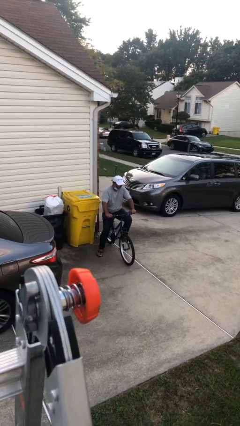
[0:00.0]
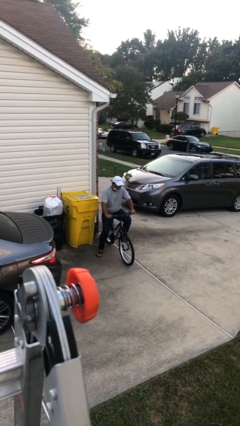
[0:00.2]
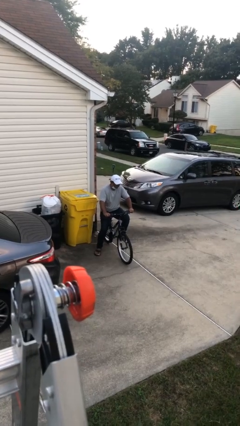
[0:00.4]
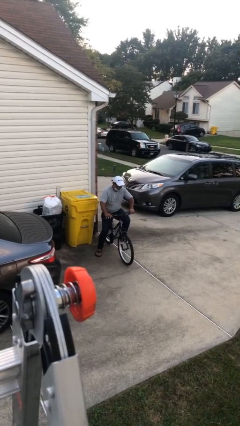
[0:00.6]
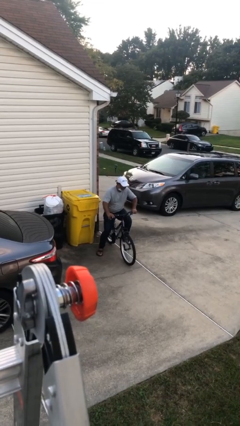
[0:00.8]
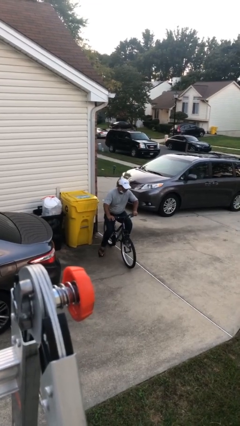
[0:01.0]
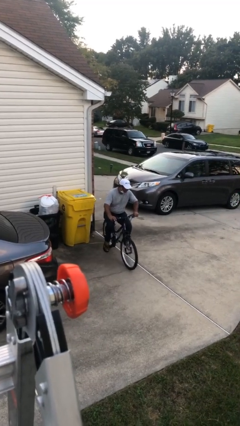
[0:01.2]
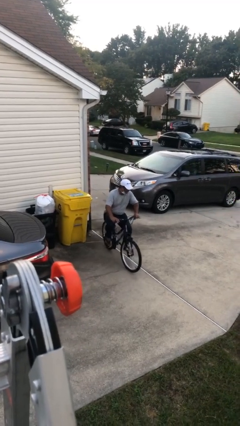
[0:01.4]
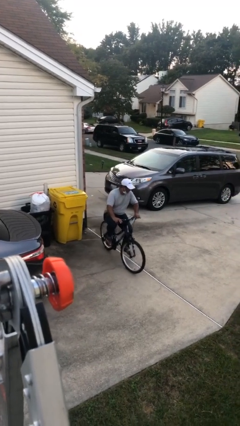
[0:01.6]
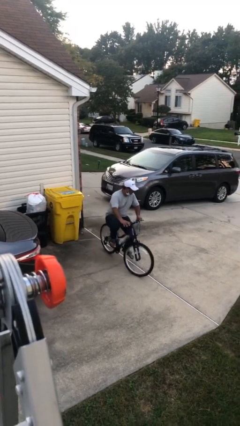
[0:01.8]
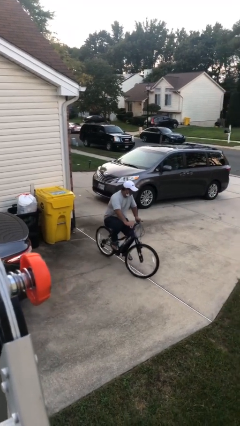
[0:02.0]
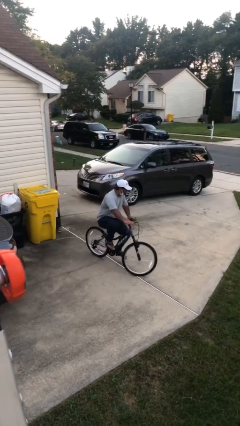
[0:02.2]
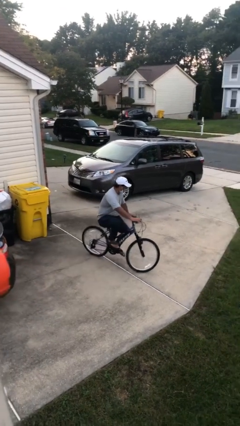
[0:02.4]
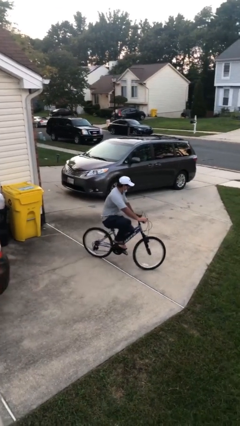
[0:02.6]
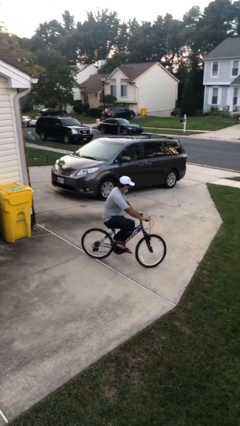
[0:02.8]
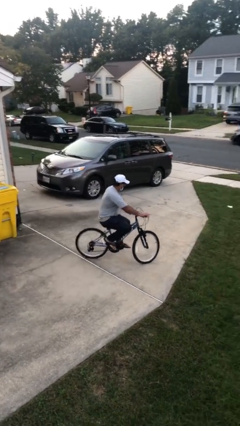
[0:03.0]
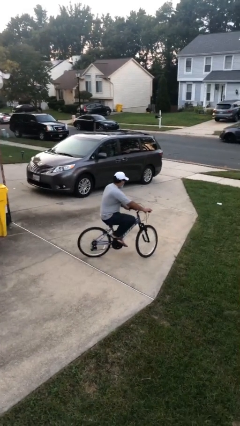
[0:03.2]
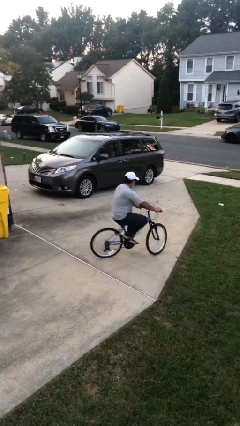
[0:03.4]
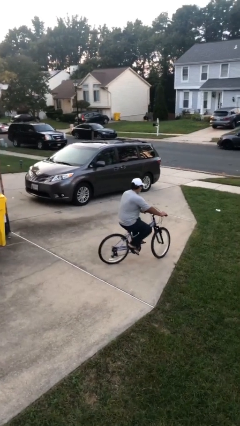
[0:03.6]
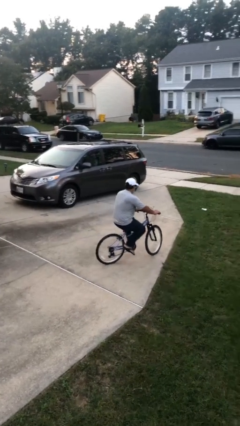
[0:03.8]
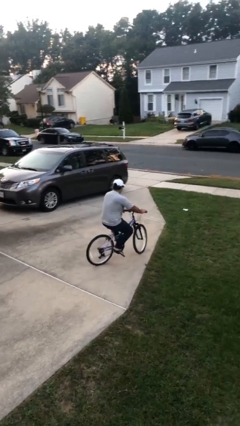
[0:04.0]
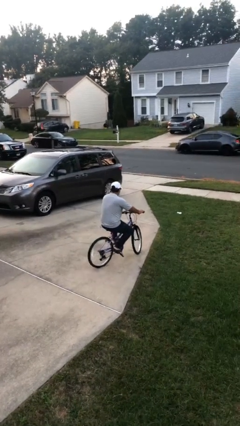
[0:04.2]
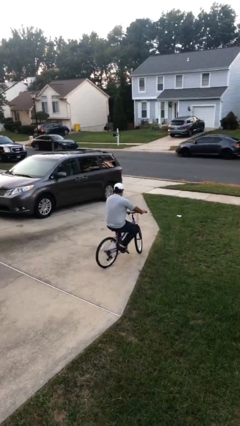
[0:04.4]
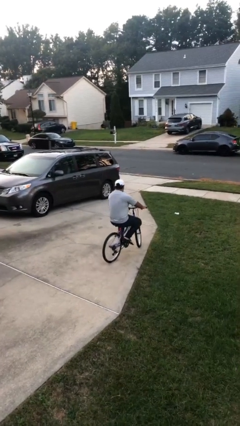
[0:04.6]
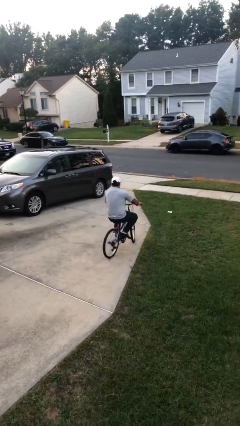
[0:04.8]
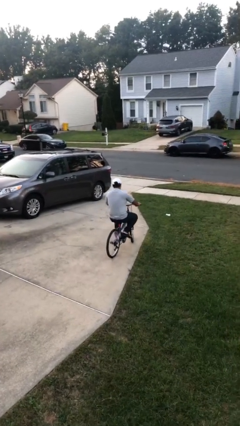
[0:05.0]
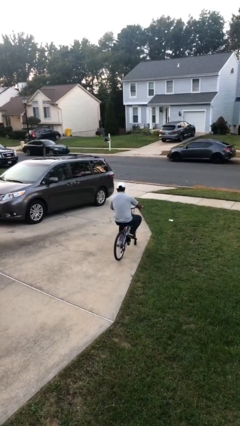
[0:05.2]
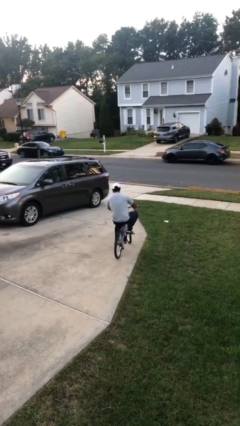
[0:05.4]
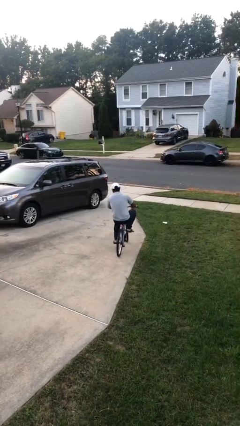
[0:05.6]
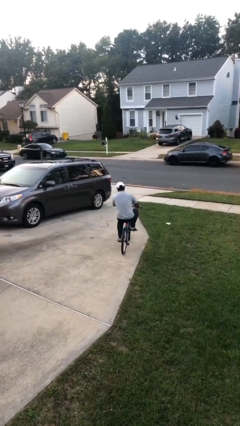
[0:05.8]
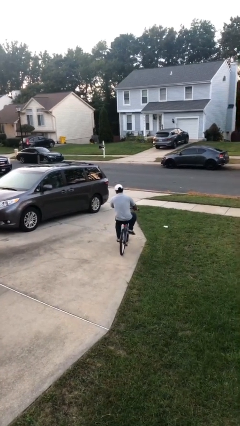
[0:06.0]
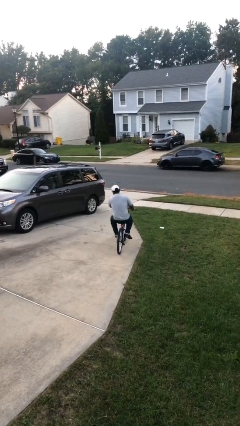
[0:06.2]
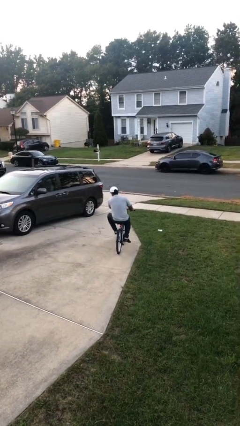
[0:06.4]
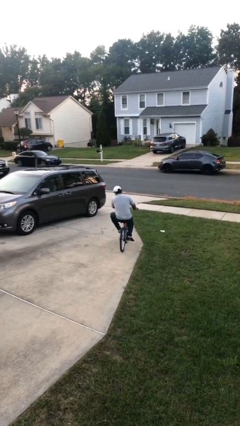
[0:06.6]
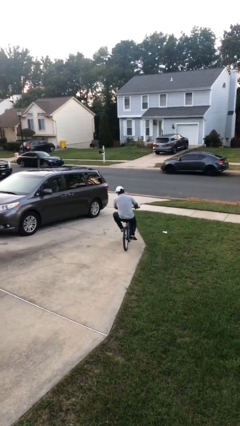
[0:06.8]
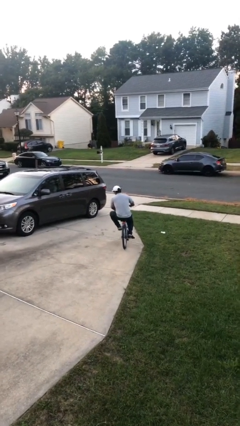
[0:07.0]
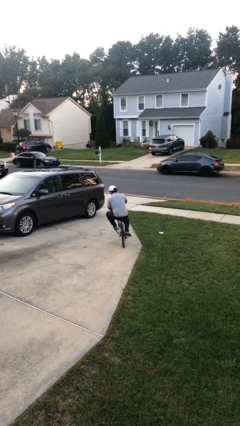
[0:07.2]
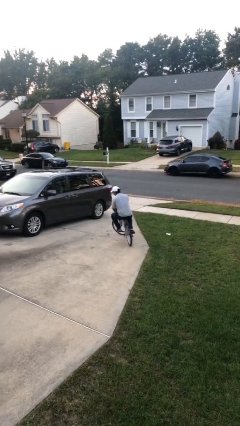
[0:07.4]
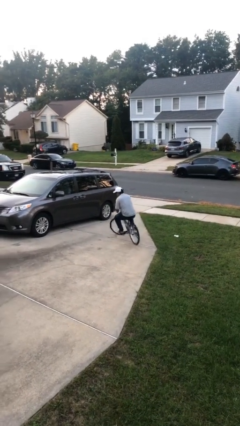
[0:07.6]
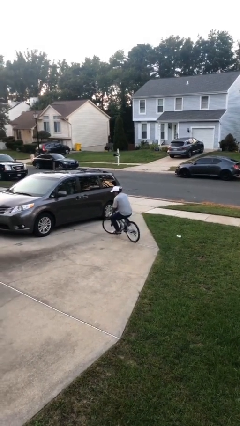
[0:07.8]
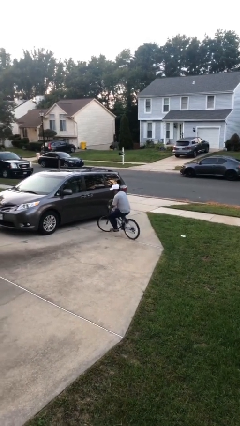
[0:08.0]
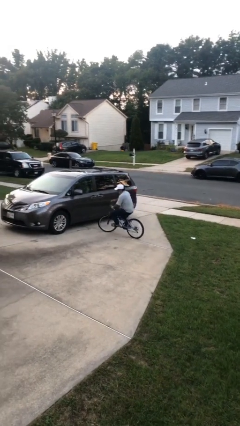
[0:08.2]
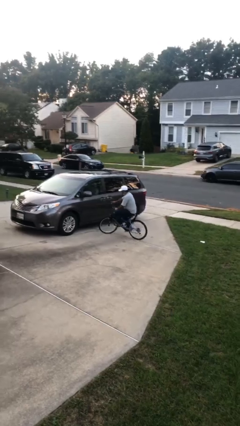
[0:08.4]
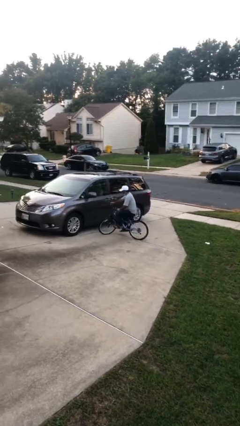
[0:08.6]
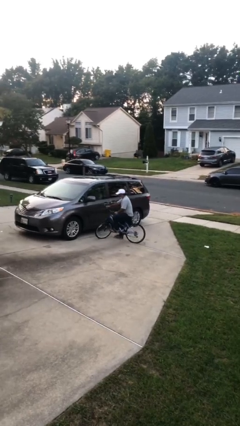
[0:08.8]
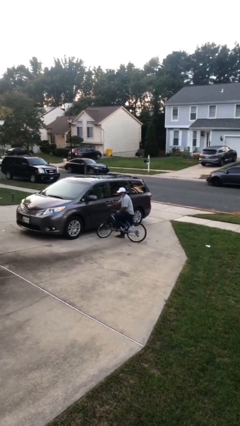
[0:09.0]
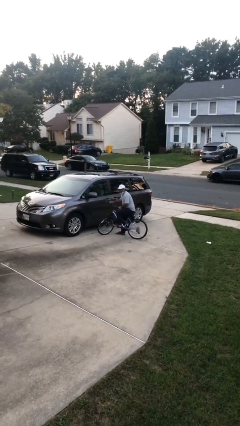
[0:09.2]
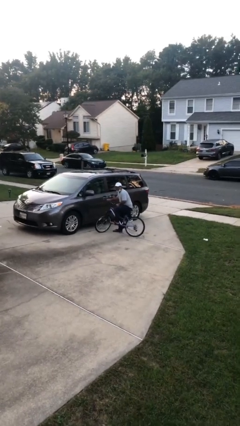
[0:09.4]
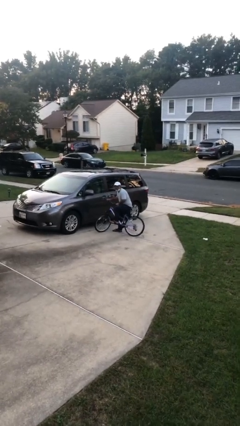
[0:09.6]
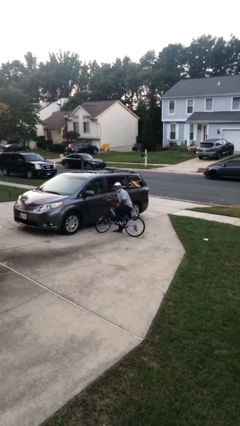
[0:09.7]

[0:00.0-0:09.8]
person rides bicycle

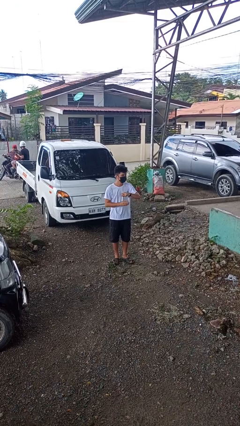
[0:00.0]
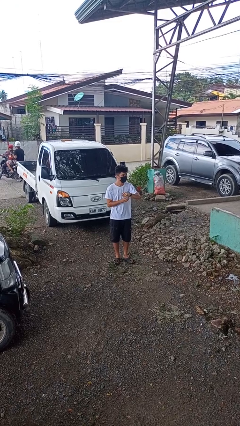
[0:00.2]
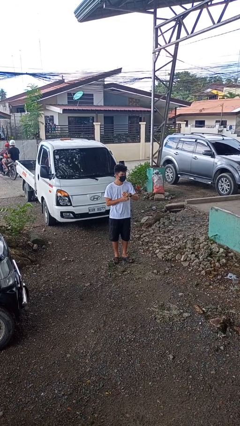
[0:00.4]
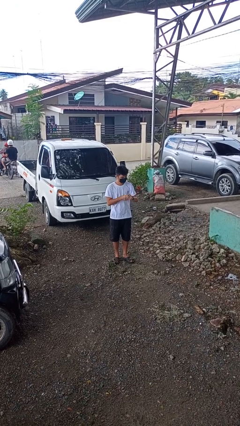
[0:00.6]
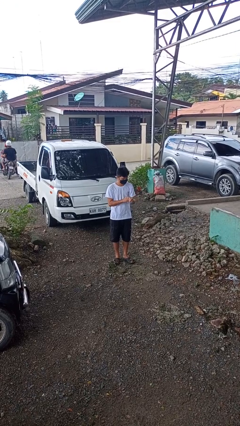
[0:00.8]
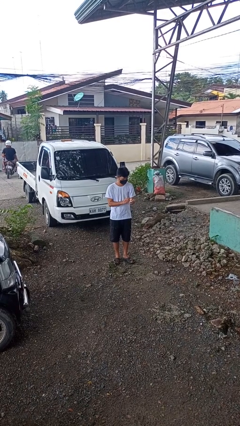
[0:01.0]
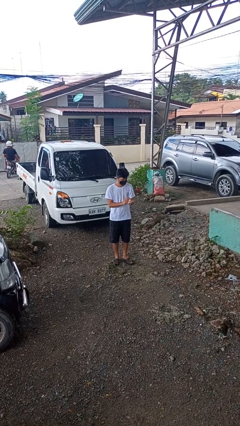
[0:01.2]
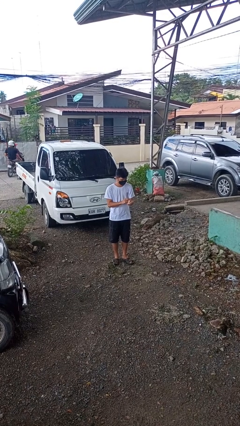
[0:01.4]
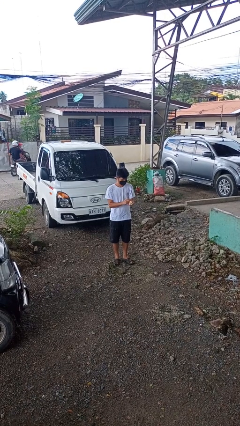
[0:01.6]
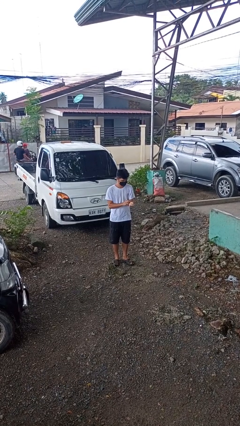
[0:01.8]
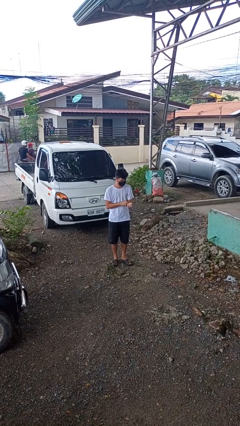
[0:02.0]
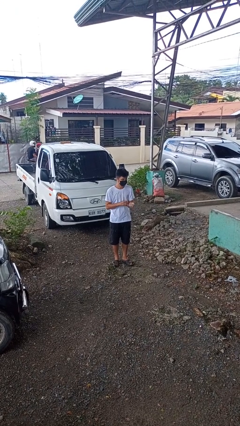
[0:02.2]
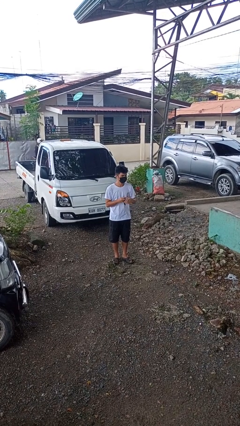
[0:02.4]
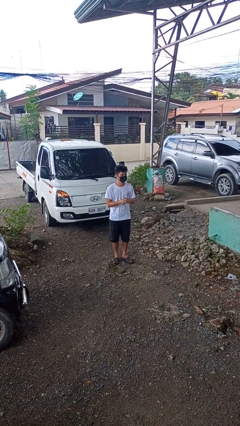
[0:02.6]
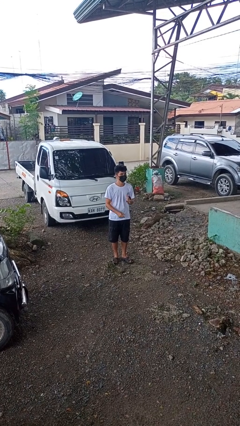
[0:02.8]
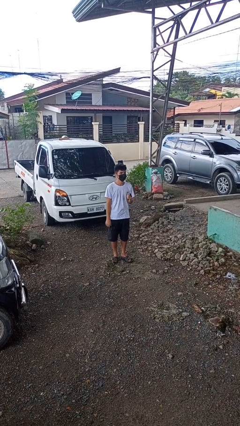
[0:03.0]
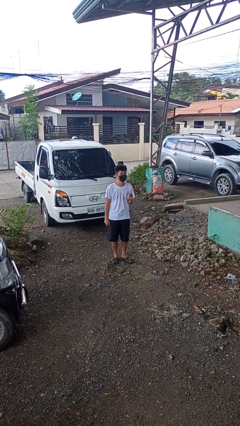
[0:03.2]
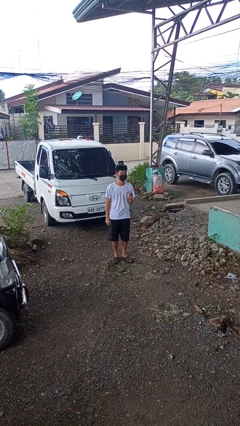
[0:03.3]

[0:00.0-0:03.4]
person takes off wristwatch

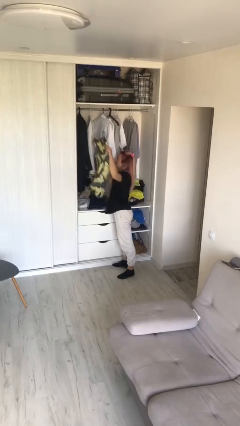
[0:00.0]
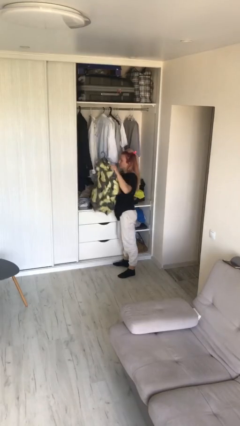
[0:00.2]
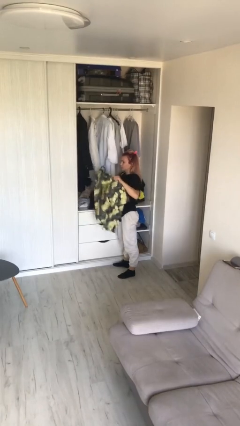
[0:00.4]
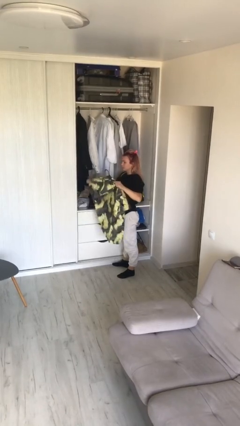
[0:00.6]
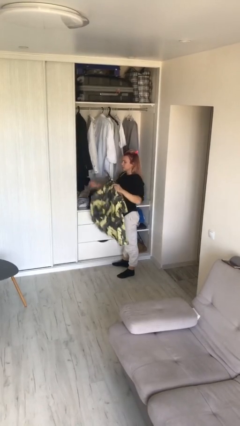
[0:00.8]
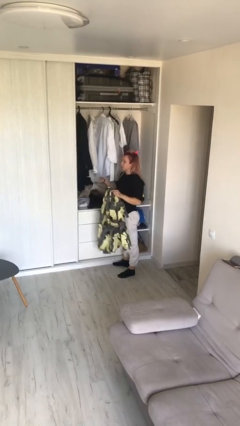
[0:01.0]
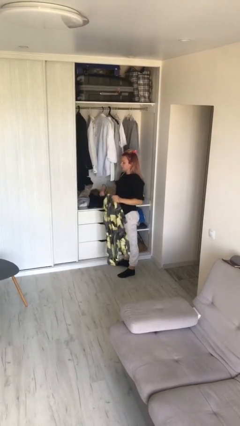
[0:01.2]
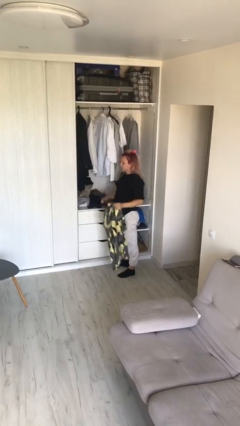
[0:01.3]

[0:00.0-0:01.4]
person takes clothes from closet

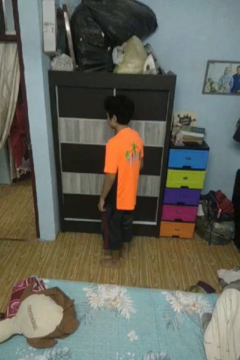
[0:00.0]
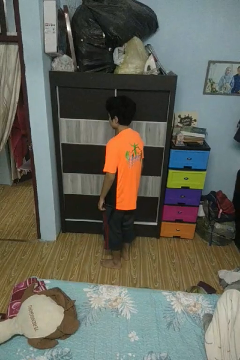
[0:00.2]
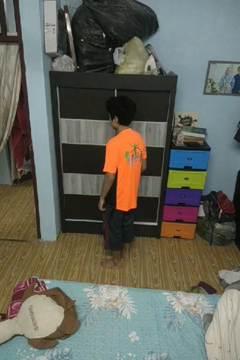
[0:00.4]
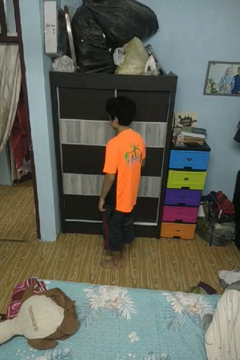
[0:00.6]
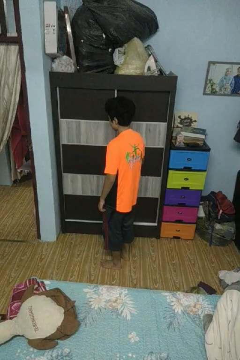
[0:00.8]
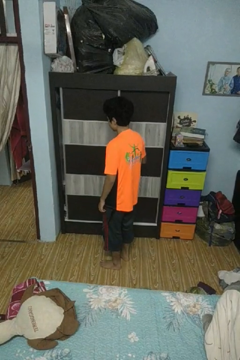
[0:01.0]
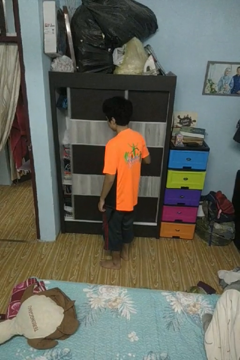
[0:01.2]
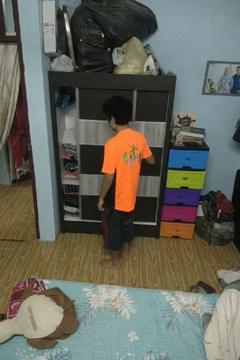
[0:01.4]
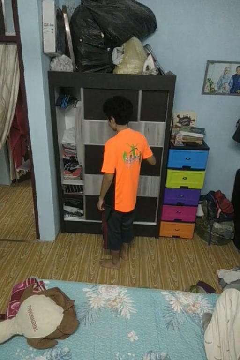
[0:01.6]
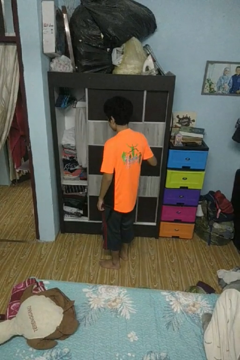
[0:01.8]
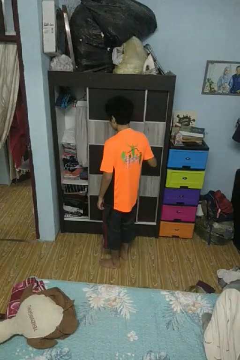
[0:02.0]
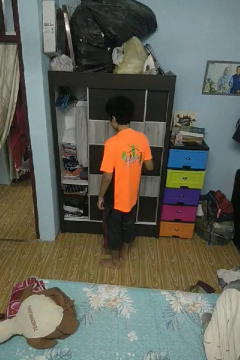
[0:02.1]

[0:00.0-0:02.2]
person opens closet door

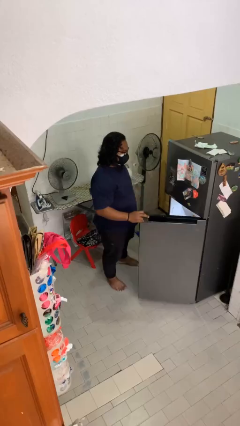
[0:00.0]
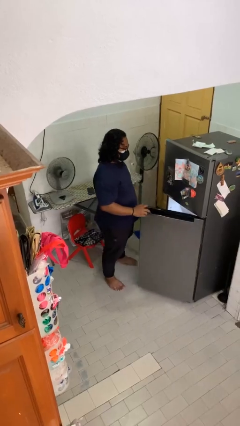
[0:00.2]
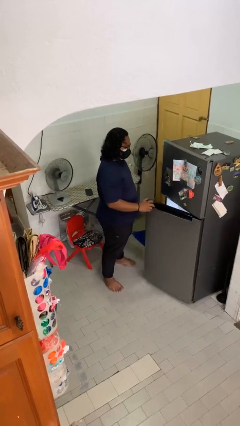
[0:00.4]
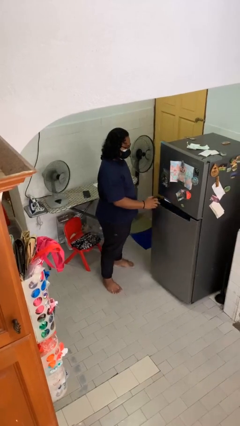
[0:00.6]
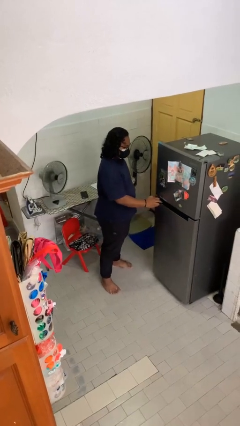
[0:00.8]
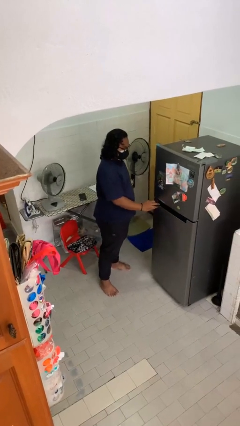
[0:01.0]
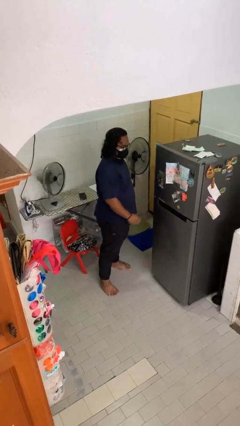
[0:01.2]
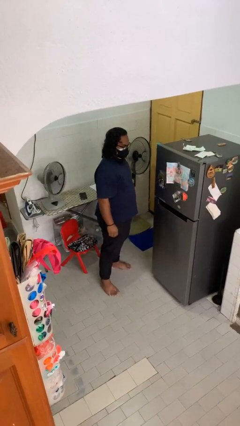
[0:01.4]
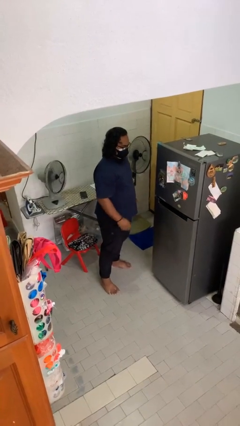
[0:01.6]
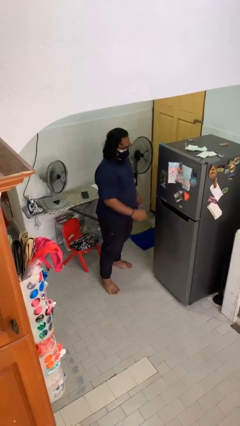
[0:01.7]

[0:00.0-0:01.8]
person closes refrigerator
